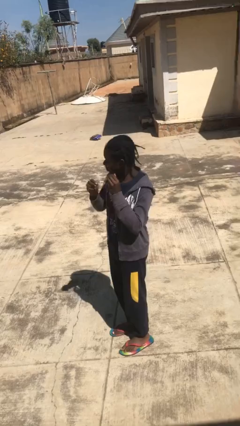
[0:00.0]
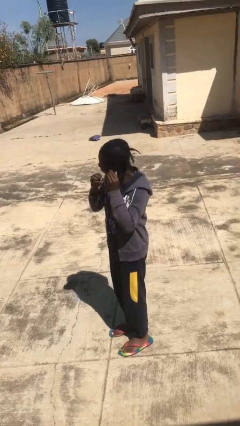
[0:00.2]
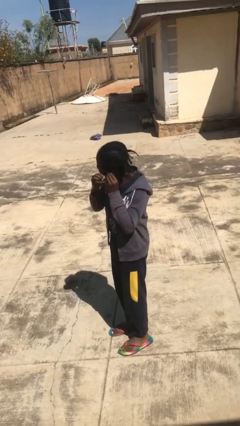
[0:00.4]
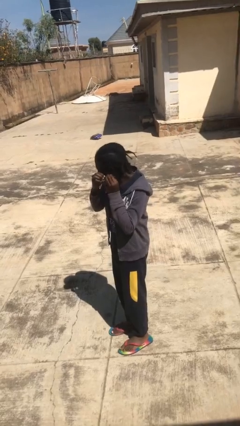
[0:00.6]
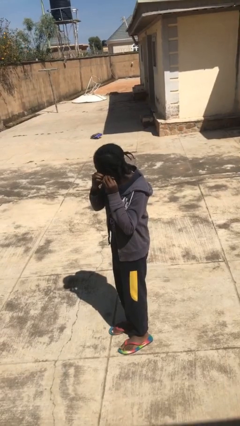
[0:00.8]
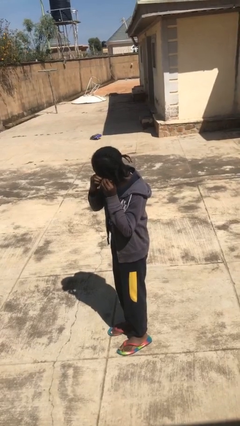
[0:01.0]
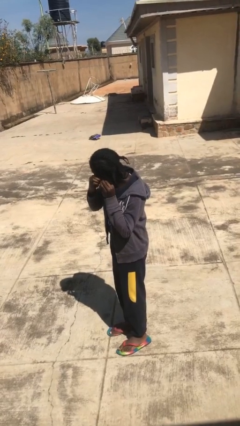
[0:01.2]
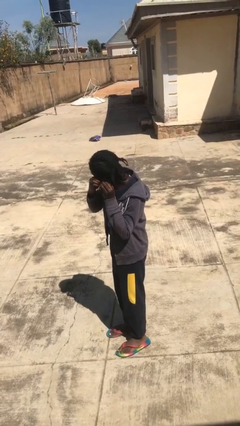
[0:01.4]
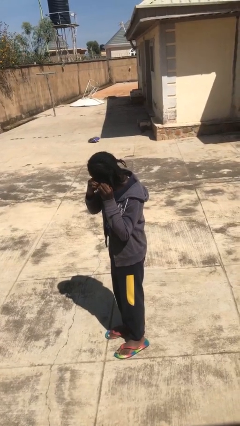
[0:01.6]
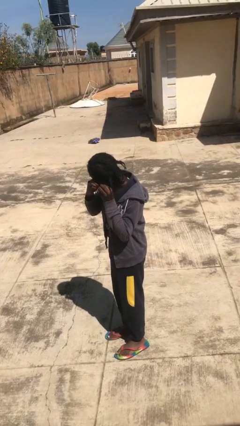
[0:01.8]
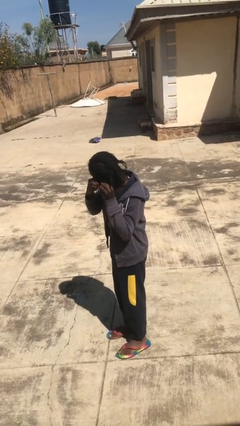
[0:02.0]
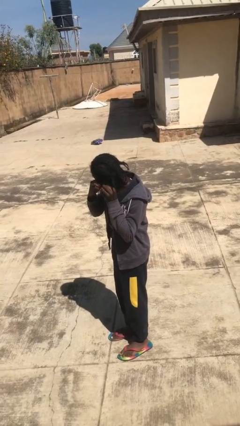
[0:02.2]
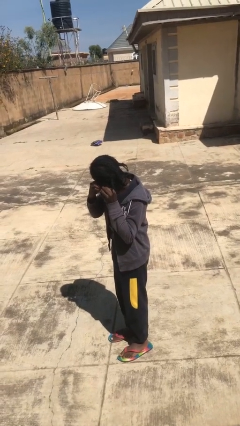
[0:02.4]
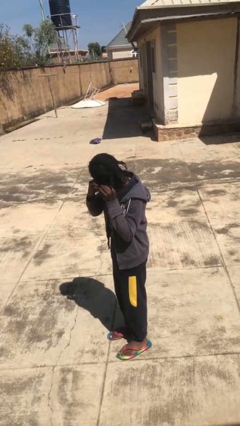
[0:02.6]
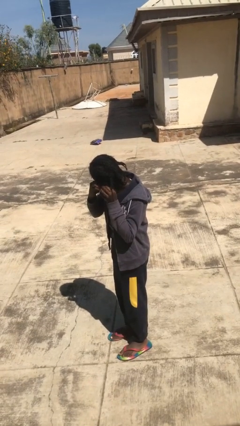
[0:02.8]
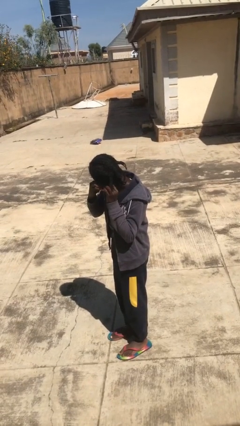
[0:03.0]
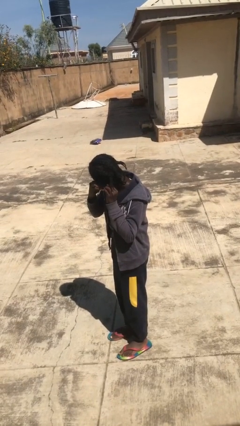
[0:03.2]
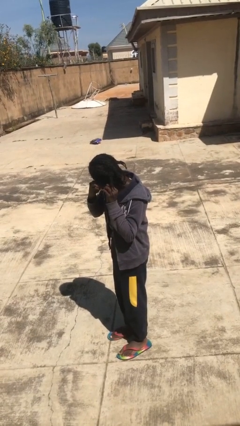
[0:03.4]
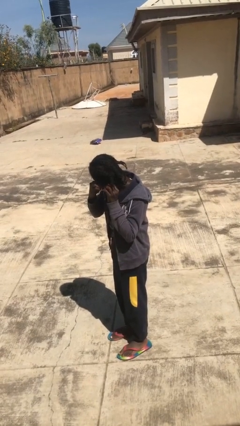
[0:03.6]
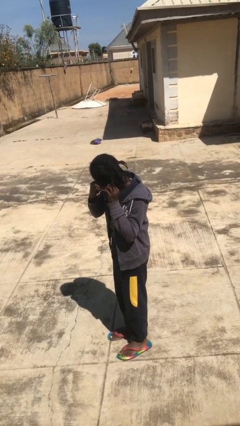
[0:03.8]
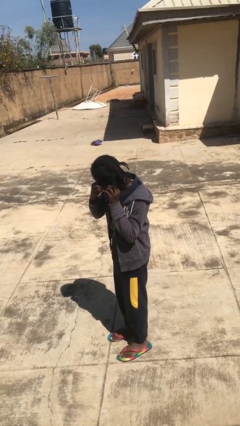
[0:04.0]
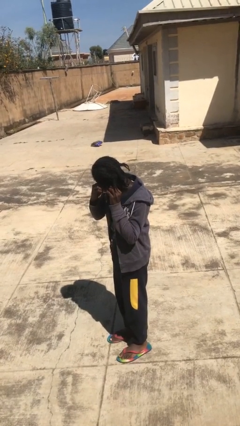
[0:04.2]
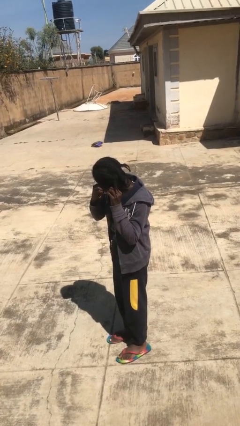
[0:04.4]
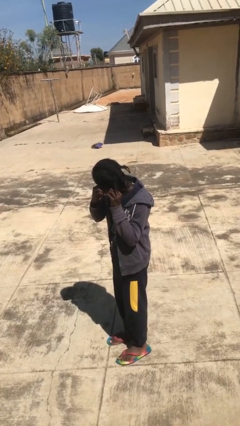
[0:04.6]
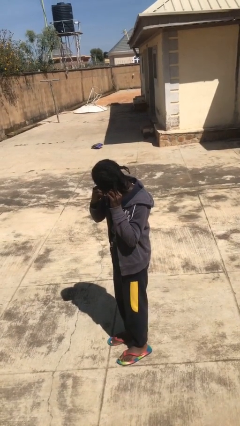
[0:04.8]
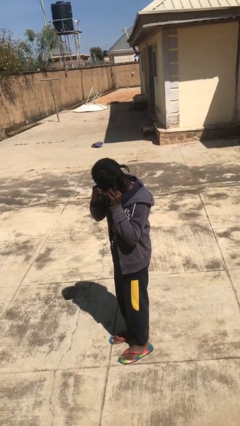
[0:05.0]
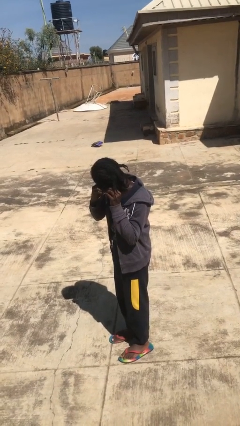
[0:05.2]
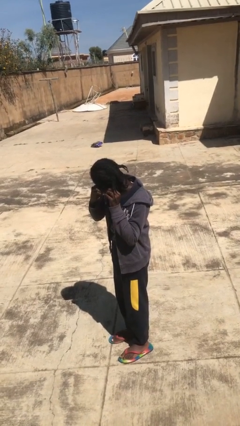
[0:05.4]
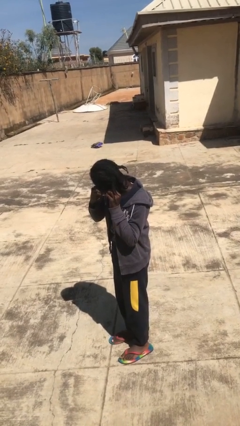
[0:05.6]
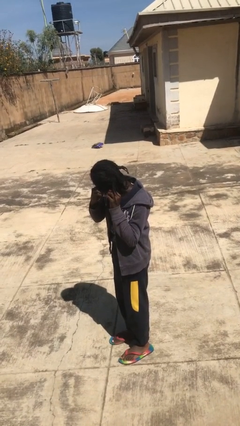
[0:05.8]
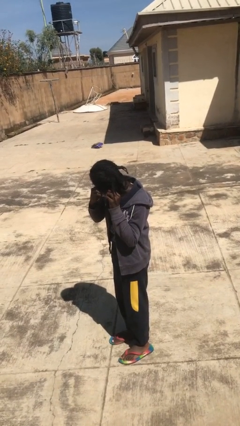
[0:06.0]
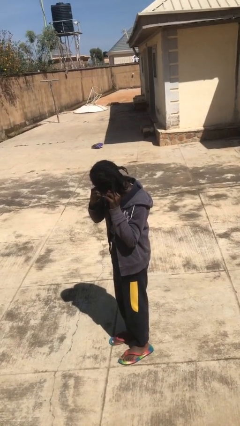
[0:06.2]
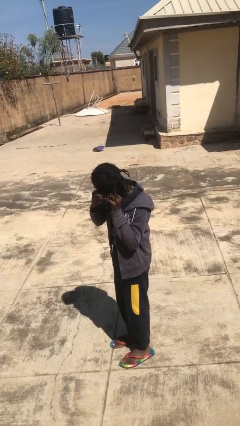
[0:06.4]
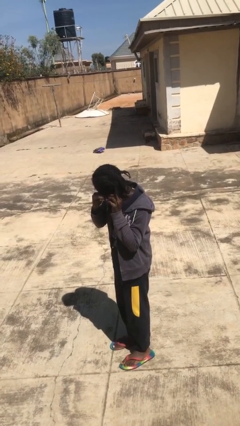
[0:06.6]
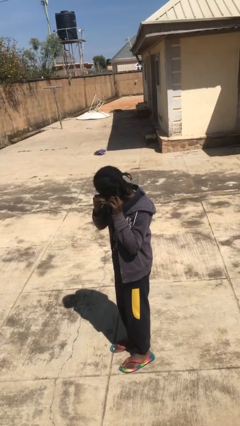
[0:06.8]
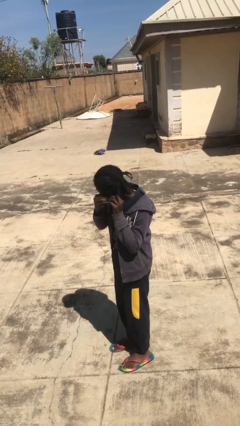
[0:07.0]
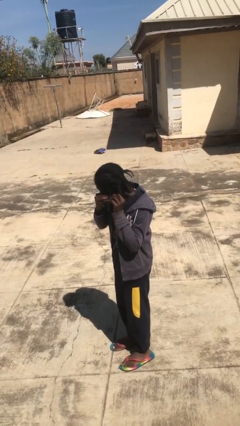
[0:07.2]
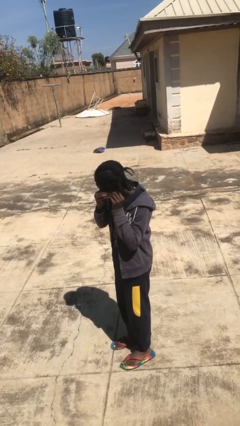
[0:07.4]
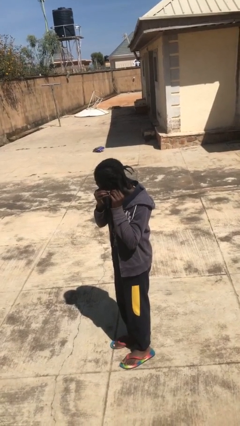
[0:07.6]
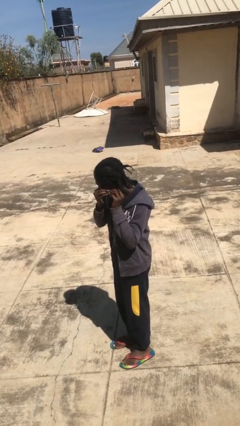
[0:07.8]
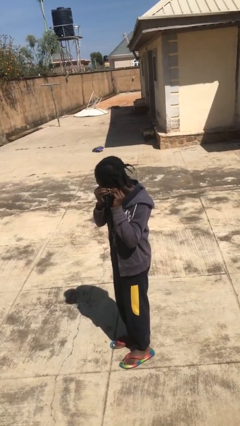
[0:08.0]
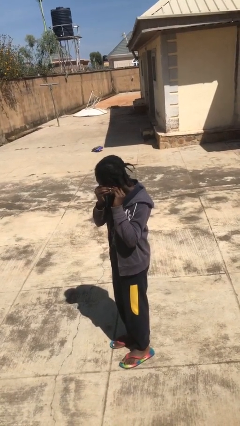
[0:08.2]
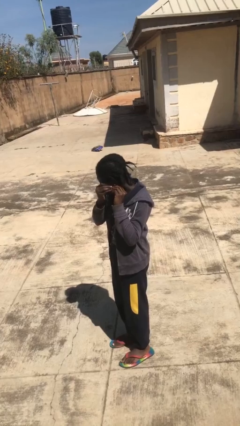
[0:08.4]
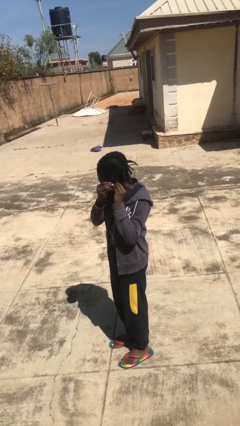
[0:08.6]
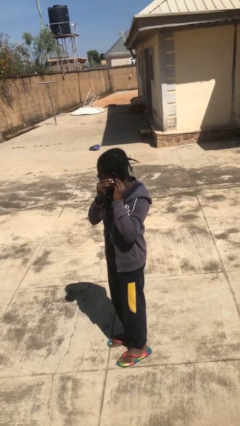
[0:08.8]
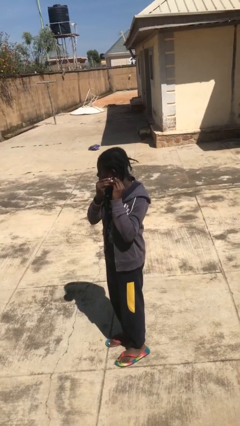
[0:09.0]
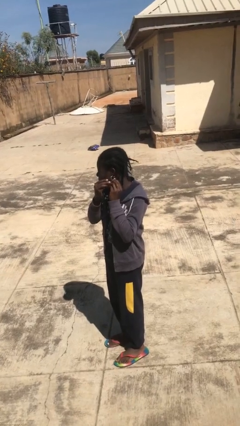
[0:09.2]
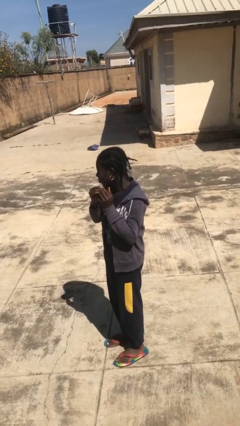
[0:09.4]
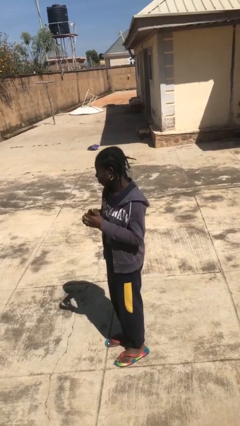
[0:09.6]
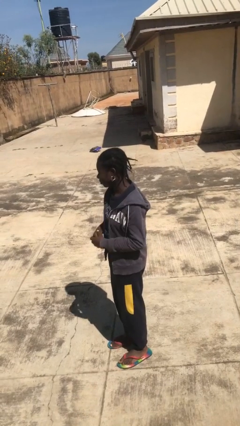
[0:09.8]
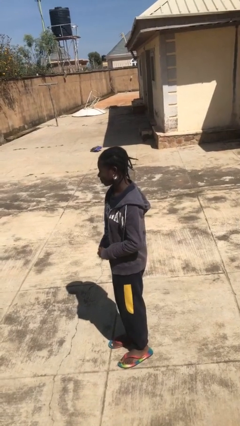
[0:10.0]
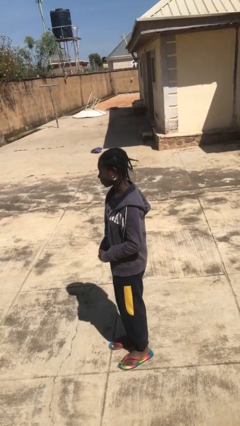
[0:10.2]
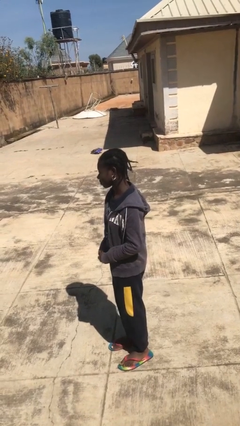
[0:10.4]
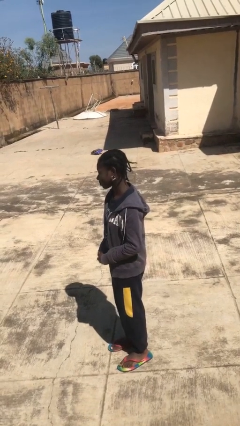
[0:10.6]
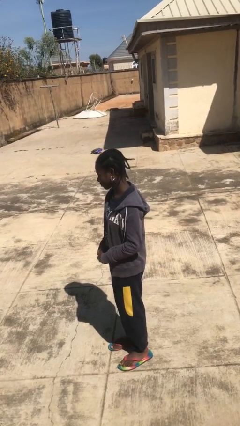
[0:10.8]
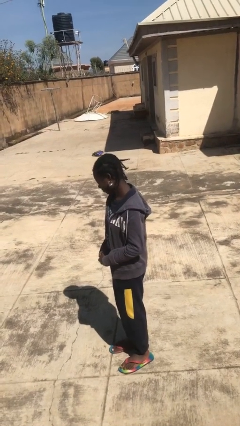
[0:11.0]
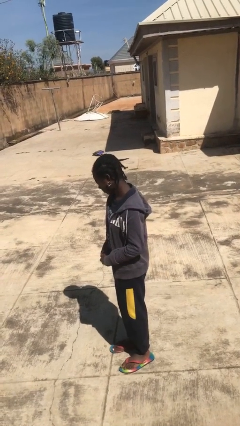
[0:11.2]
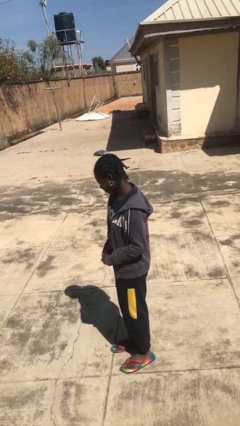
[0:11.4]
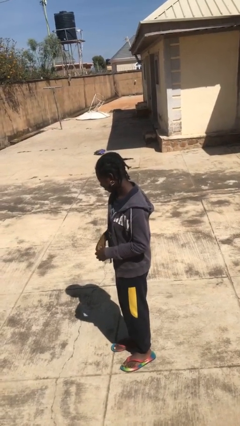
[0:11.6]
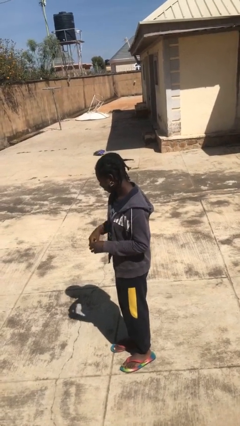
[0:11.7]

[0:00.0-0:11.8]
person puts on earrings

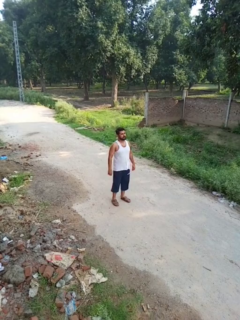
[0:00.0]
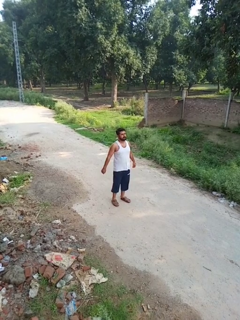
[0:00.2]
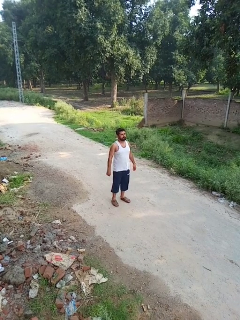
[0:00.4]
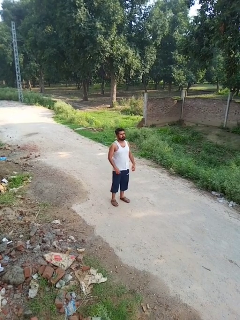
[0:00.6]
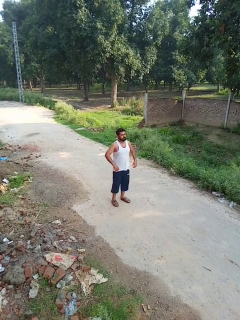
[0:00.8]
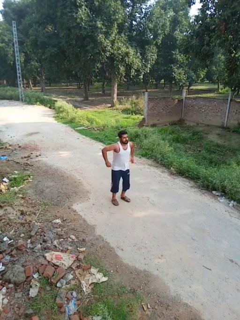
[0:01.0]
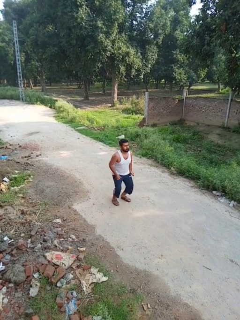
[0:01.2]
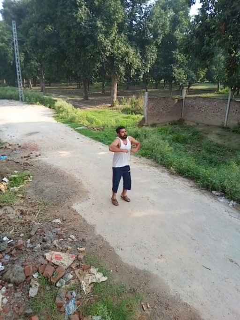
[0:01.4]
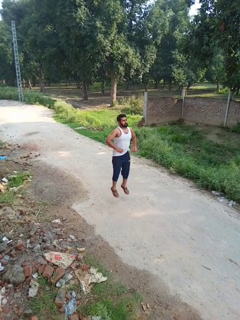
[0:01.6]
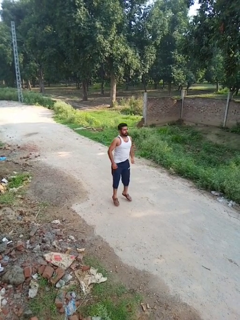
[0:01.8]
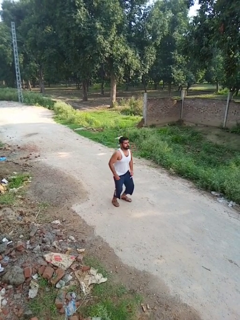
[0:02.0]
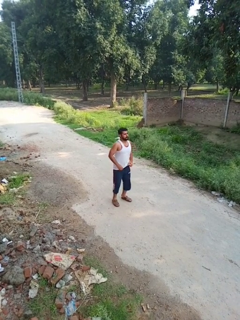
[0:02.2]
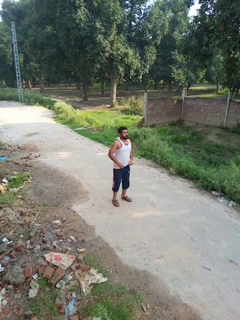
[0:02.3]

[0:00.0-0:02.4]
person jumps

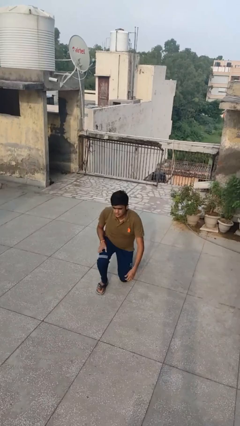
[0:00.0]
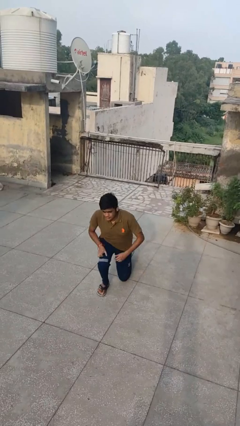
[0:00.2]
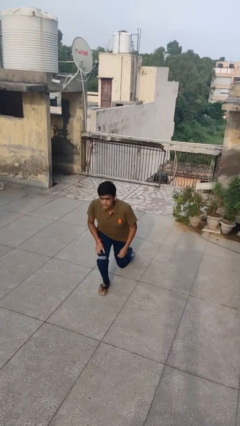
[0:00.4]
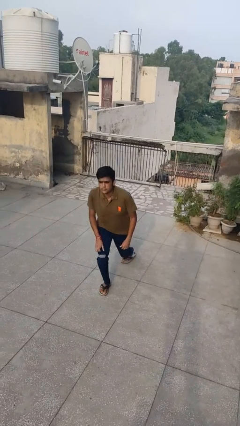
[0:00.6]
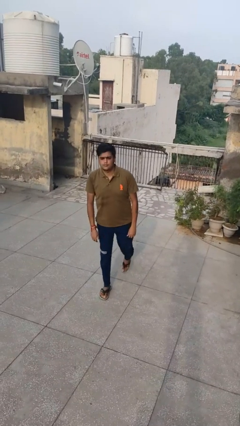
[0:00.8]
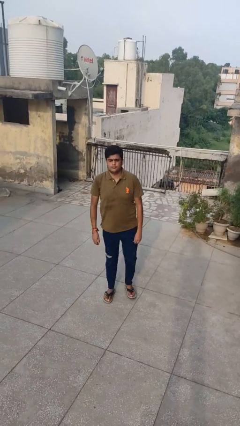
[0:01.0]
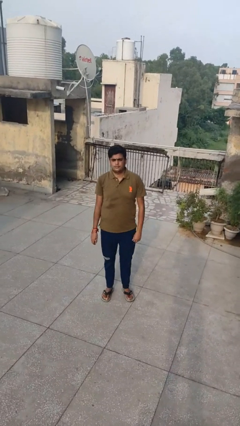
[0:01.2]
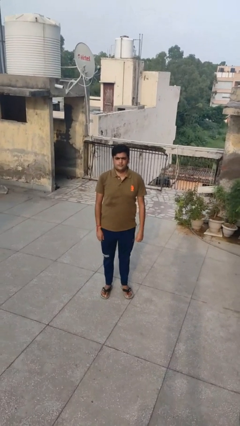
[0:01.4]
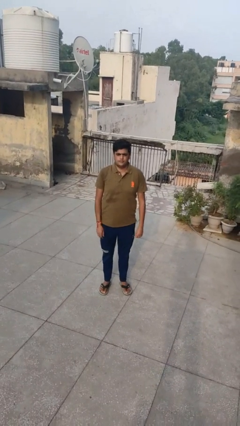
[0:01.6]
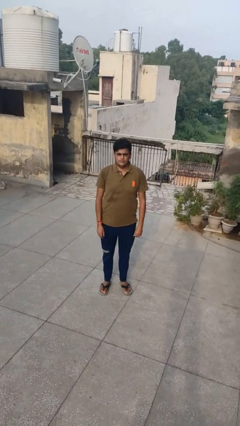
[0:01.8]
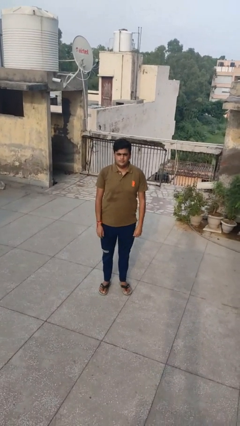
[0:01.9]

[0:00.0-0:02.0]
person stands up from floor

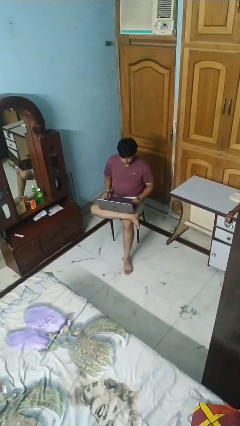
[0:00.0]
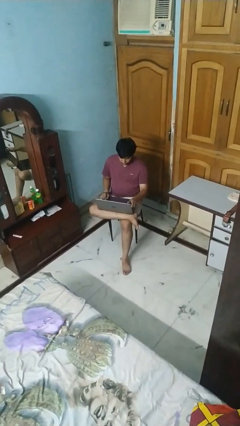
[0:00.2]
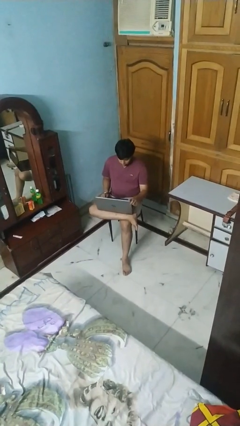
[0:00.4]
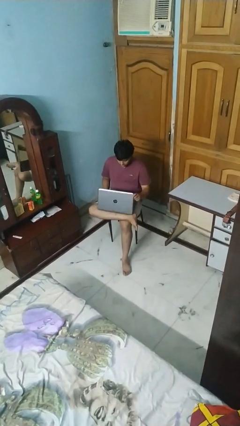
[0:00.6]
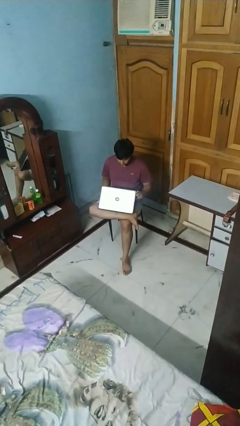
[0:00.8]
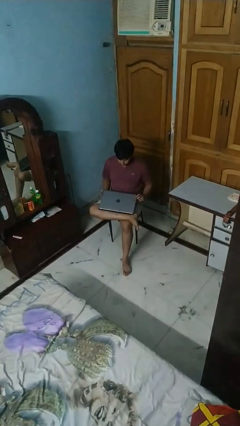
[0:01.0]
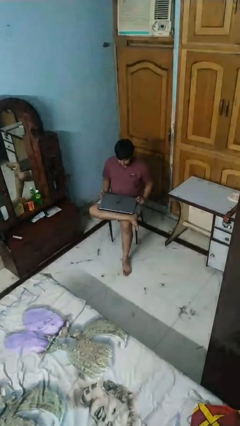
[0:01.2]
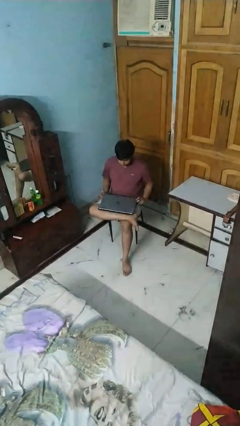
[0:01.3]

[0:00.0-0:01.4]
person closes laptop

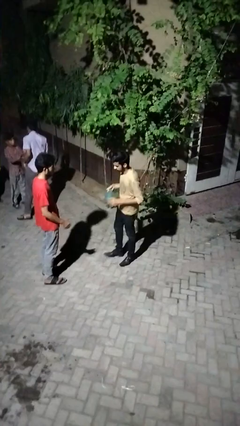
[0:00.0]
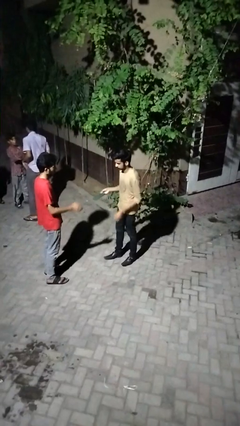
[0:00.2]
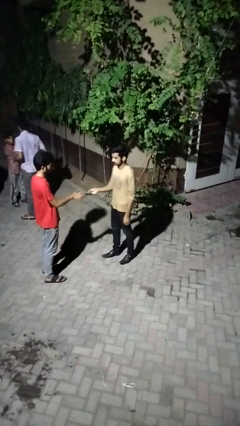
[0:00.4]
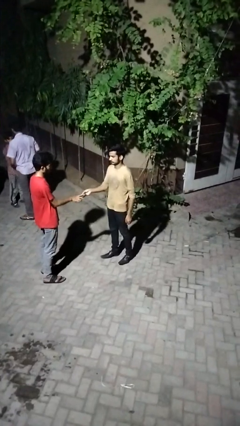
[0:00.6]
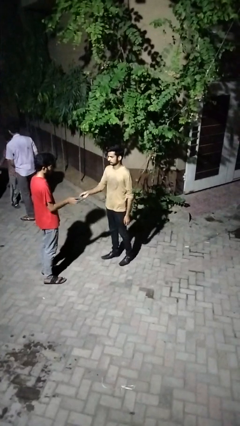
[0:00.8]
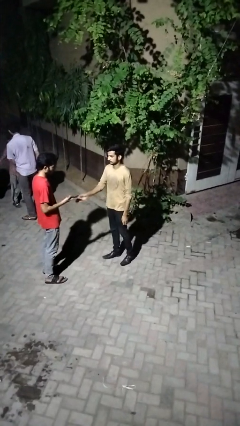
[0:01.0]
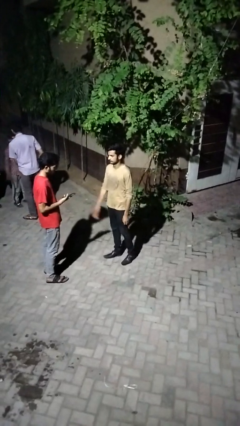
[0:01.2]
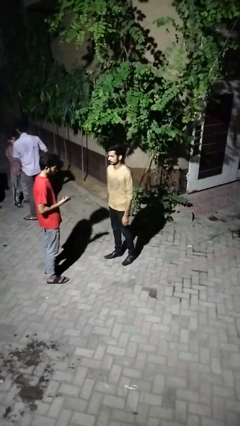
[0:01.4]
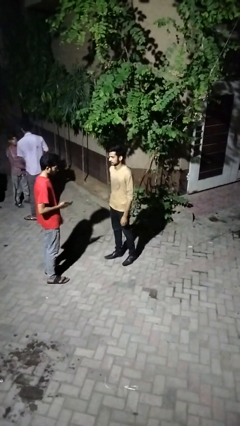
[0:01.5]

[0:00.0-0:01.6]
person transfers object to person
